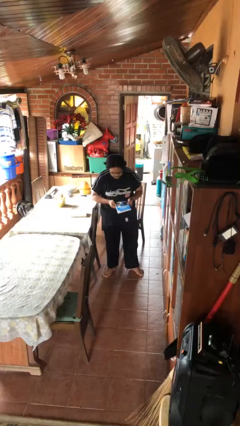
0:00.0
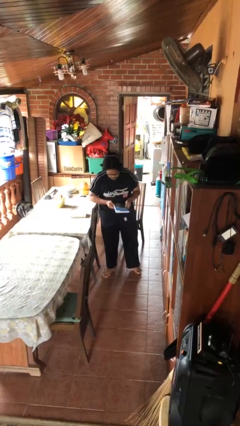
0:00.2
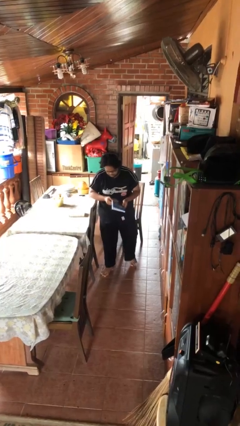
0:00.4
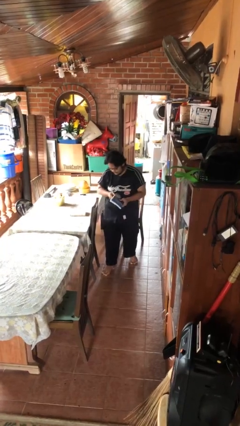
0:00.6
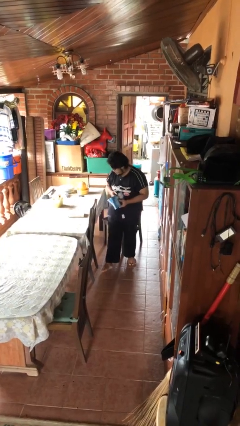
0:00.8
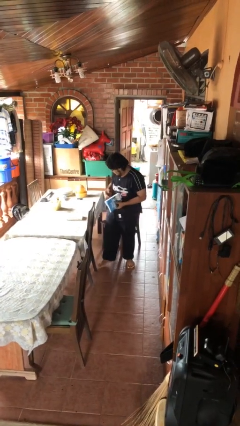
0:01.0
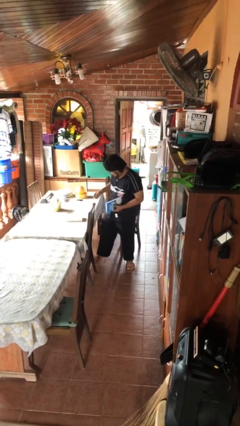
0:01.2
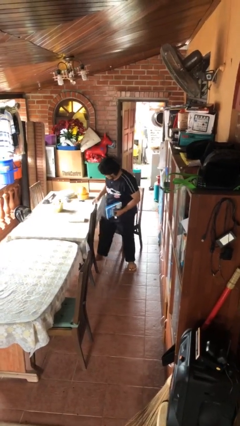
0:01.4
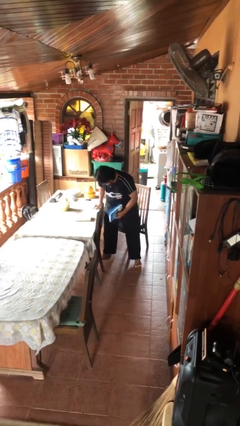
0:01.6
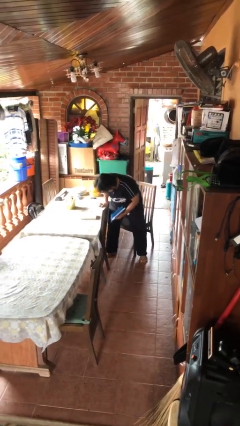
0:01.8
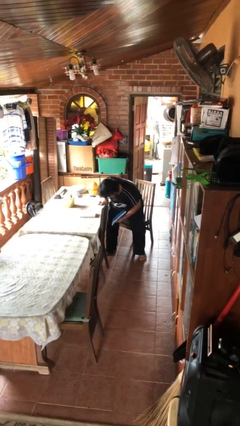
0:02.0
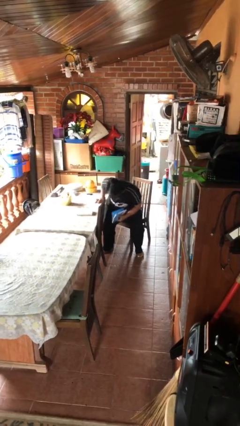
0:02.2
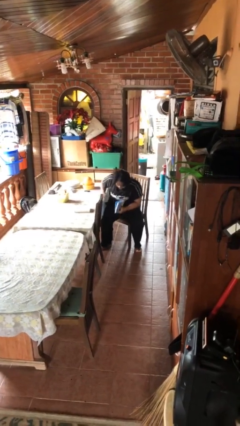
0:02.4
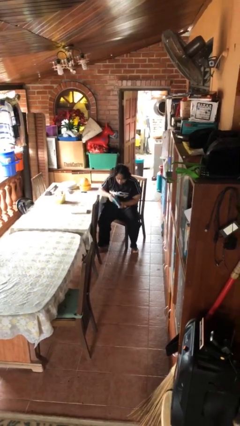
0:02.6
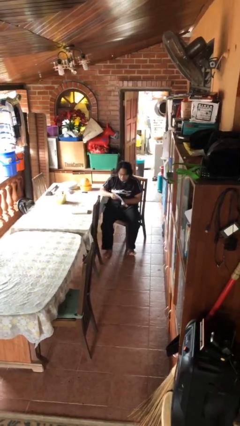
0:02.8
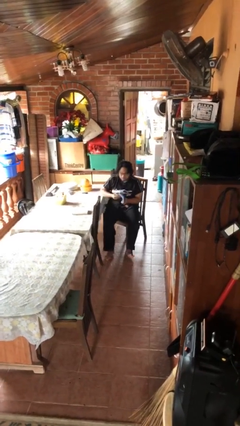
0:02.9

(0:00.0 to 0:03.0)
person sits down

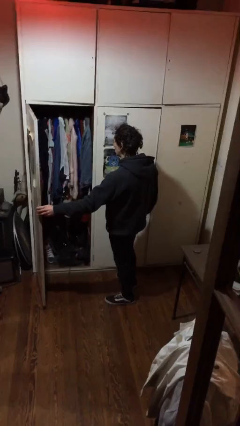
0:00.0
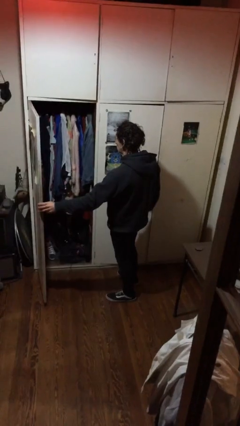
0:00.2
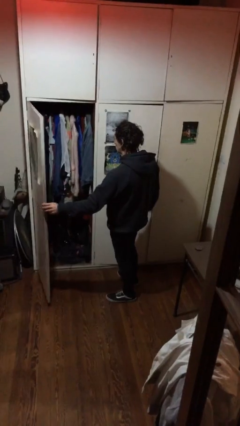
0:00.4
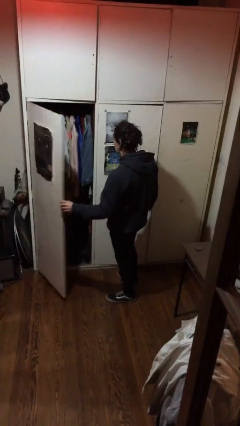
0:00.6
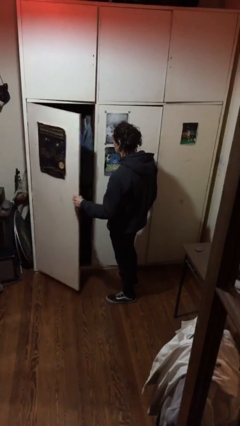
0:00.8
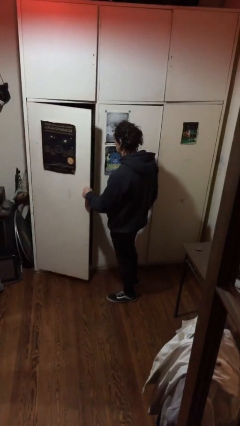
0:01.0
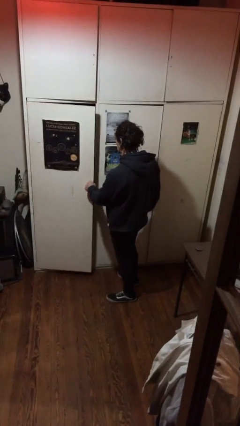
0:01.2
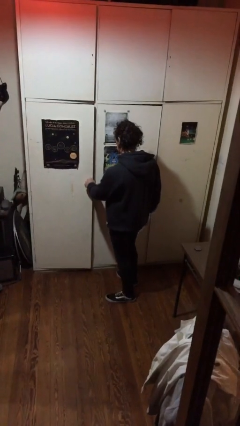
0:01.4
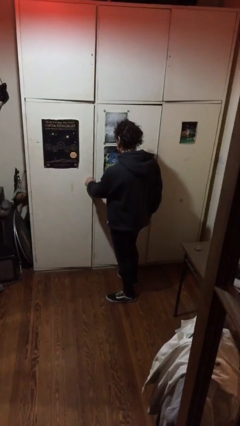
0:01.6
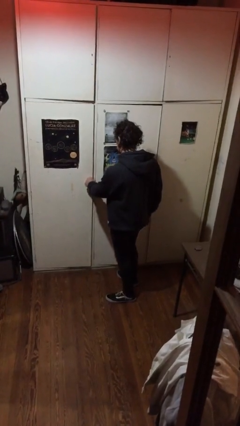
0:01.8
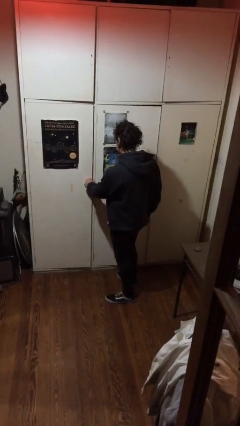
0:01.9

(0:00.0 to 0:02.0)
person closes closet door

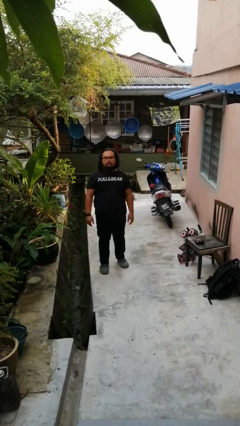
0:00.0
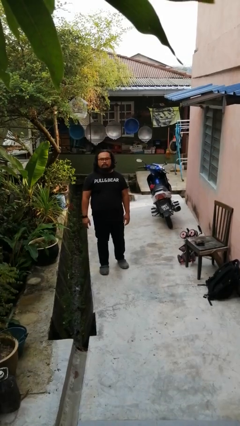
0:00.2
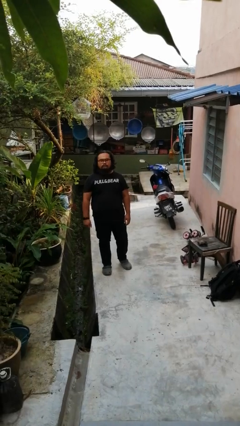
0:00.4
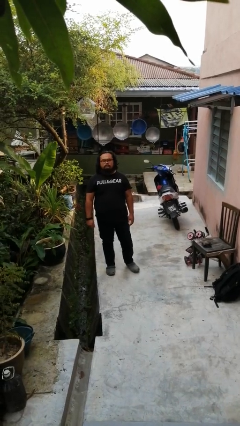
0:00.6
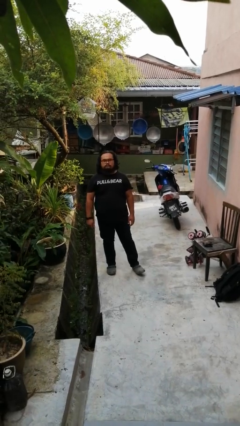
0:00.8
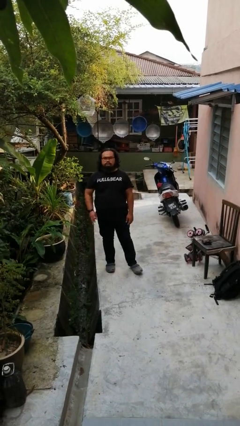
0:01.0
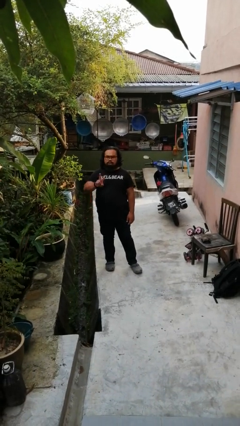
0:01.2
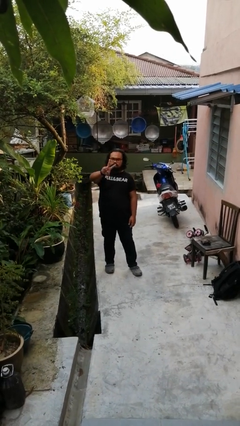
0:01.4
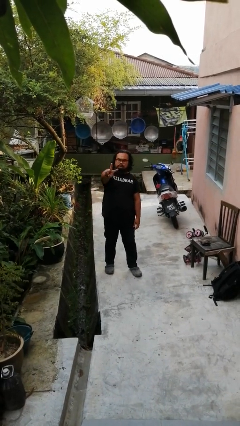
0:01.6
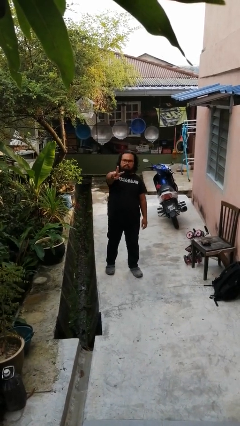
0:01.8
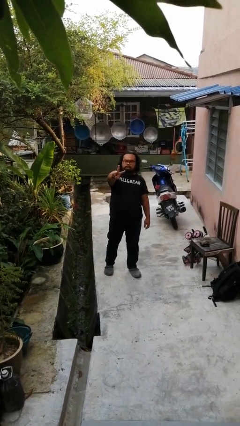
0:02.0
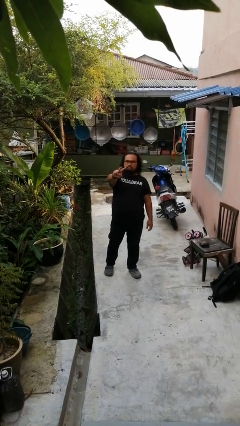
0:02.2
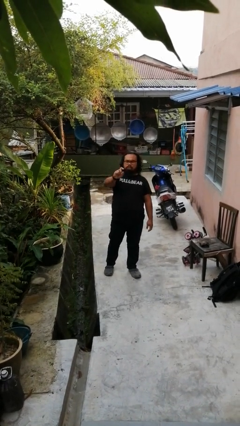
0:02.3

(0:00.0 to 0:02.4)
person gestures peace

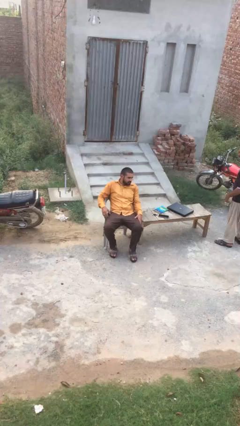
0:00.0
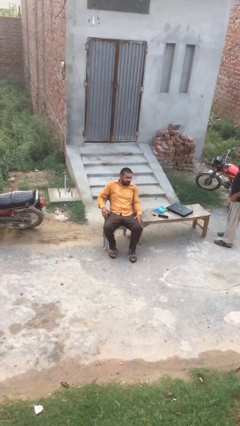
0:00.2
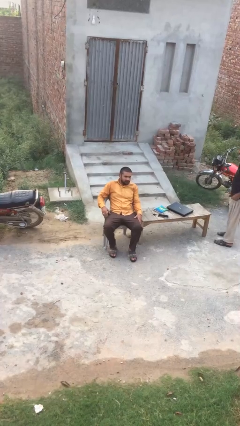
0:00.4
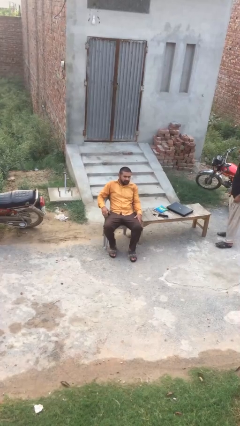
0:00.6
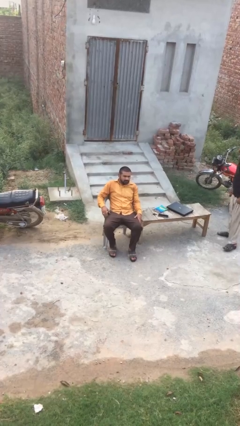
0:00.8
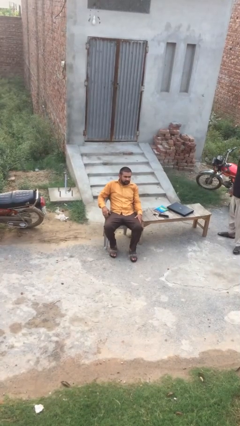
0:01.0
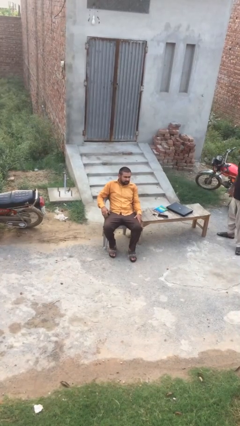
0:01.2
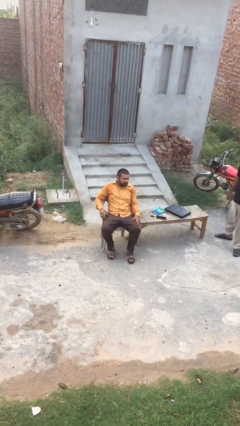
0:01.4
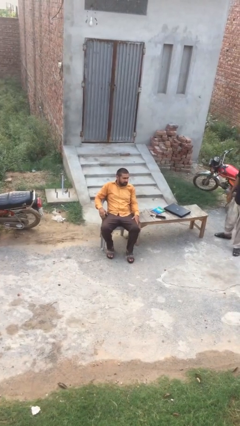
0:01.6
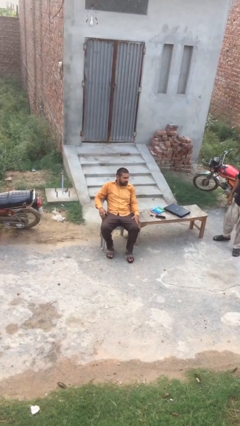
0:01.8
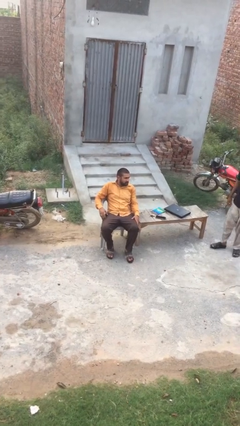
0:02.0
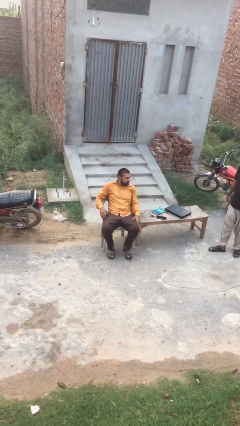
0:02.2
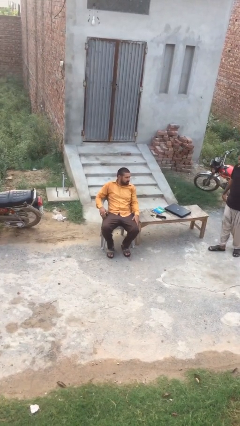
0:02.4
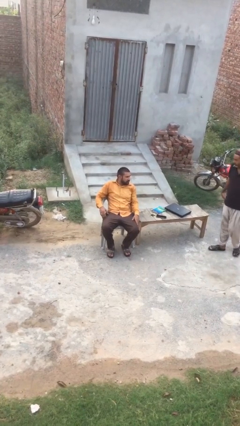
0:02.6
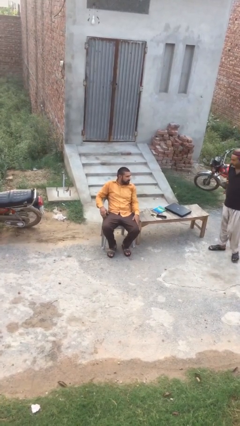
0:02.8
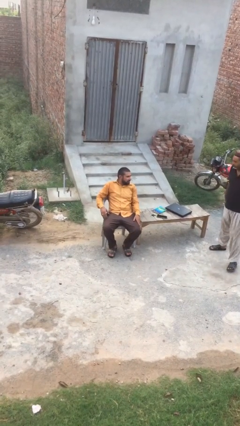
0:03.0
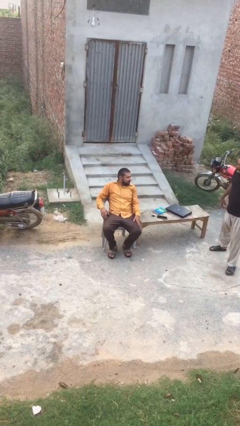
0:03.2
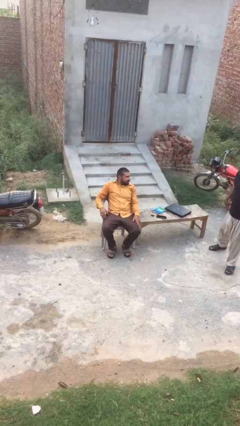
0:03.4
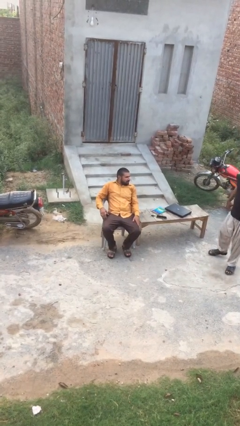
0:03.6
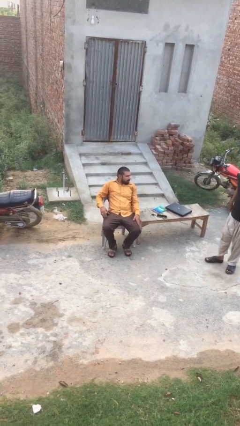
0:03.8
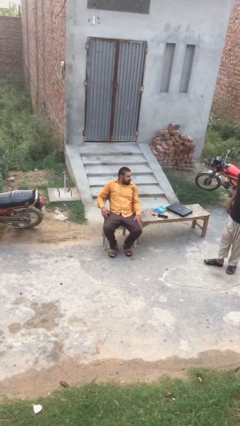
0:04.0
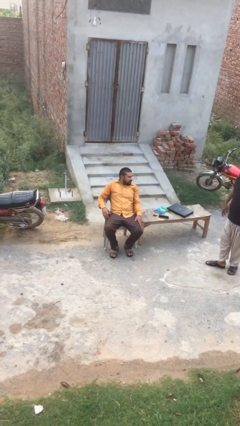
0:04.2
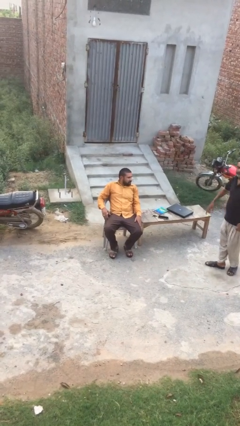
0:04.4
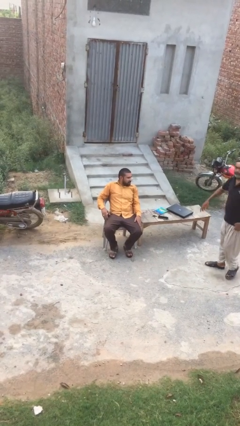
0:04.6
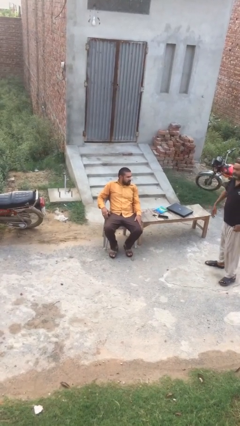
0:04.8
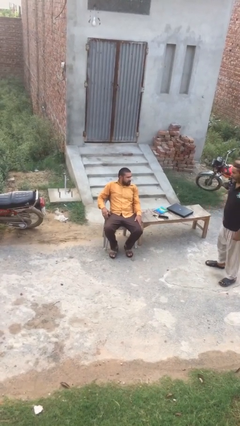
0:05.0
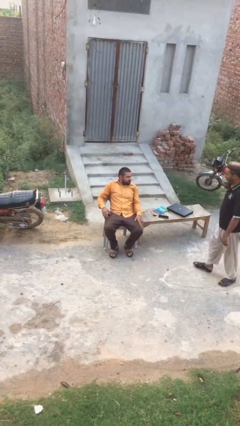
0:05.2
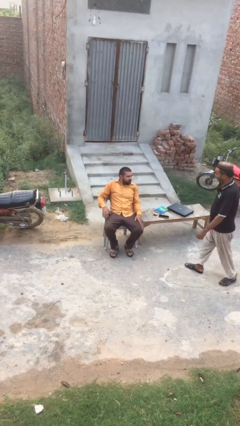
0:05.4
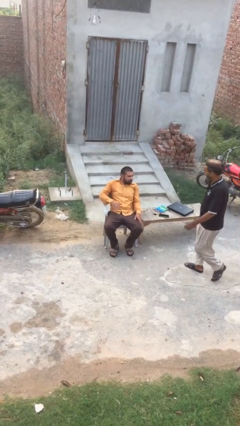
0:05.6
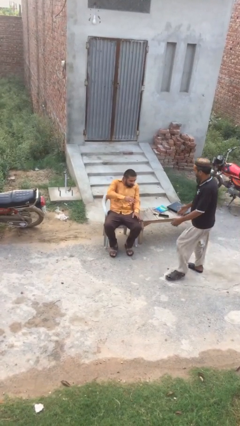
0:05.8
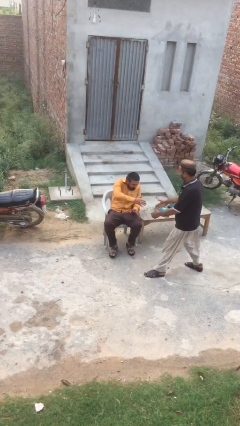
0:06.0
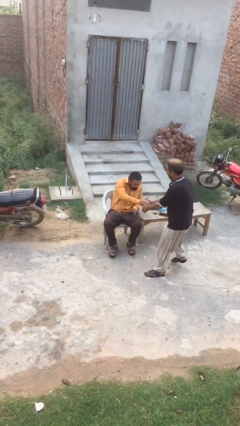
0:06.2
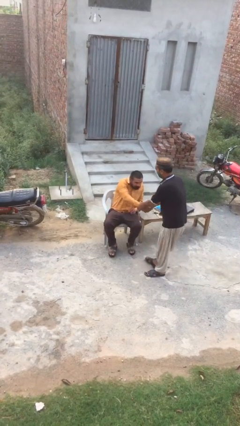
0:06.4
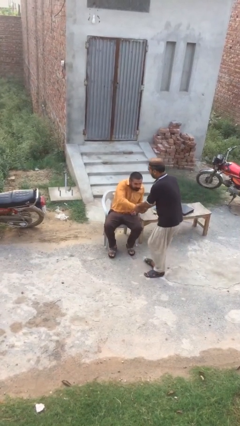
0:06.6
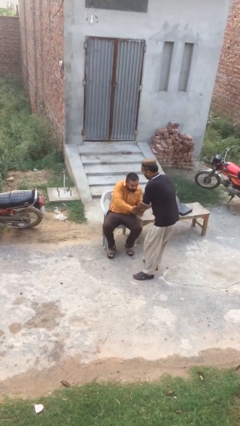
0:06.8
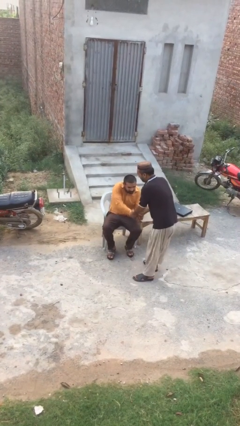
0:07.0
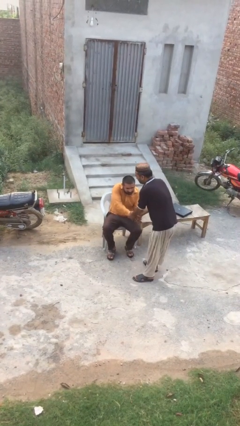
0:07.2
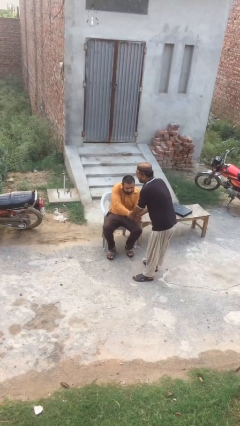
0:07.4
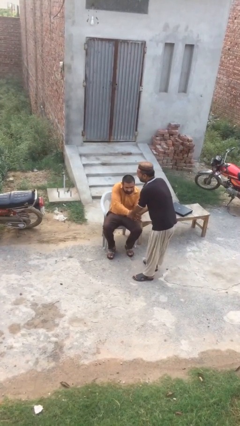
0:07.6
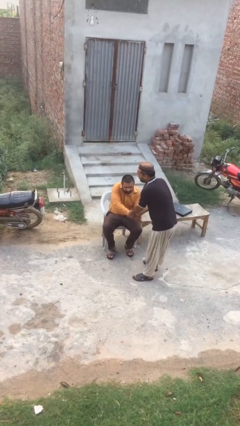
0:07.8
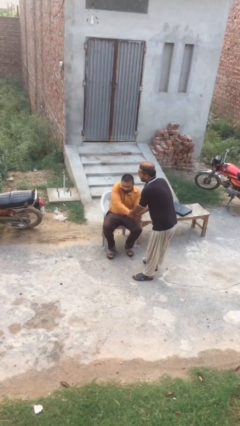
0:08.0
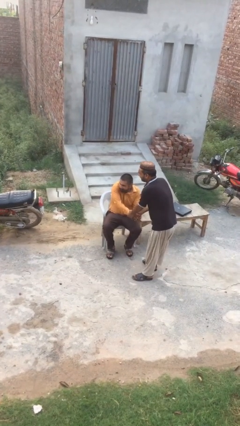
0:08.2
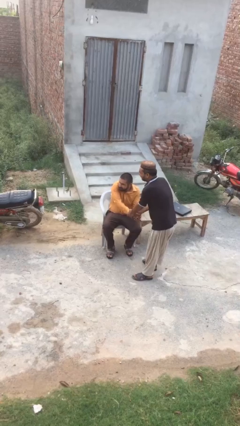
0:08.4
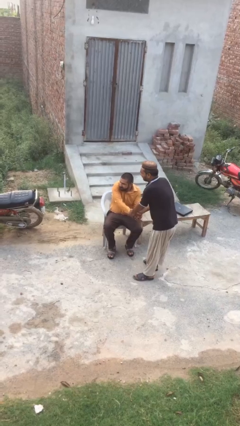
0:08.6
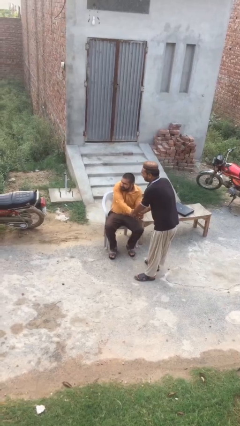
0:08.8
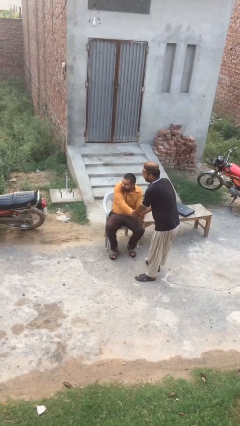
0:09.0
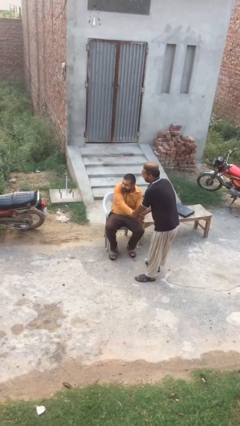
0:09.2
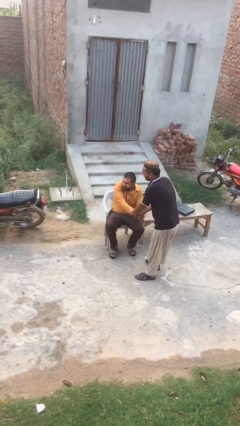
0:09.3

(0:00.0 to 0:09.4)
person shakes hand

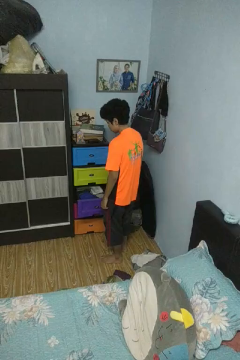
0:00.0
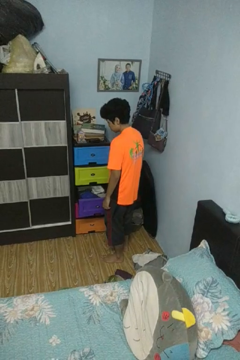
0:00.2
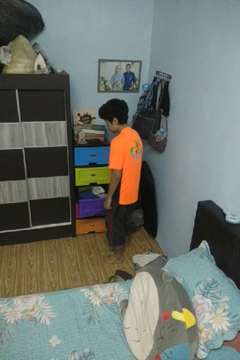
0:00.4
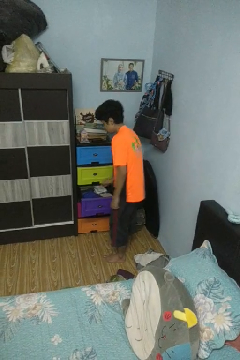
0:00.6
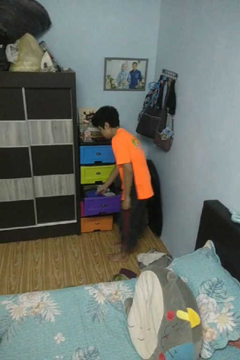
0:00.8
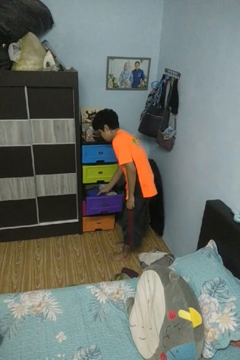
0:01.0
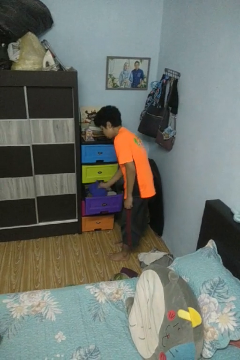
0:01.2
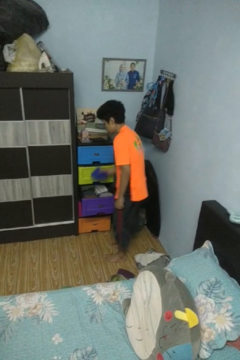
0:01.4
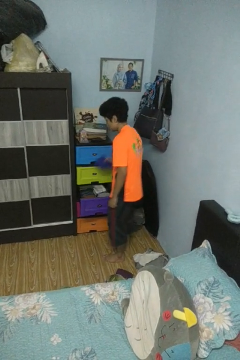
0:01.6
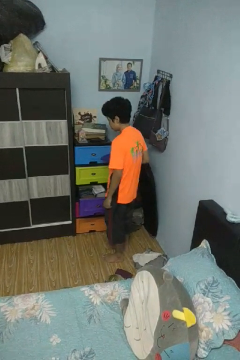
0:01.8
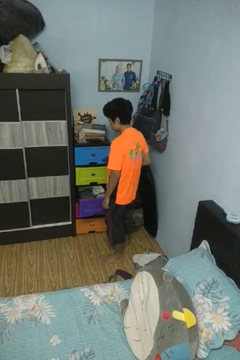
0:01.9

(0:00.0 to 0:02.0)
person takes clothes from dresser
